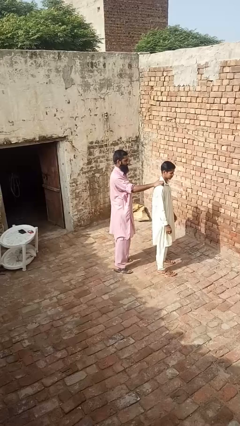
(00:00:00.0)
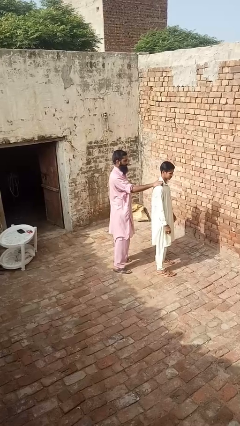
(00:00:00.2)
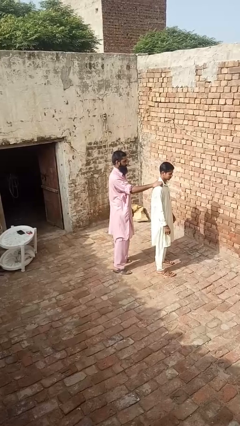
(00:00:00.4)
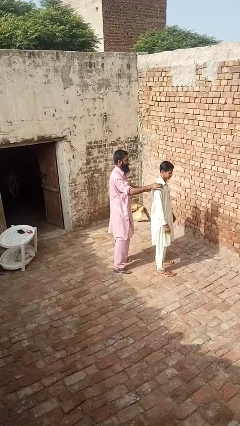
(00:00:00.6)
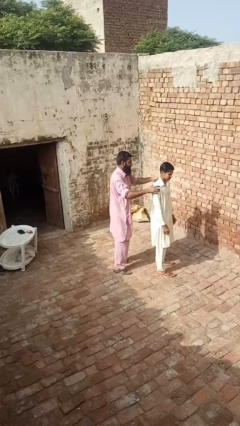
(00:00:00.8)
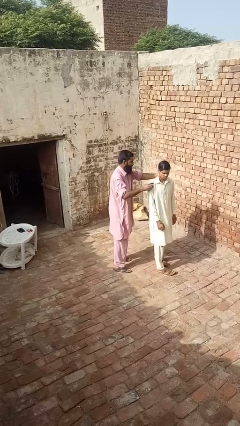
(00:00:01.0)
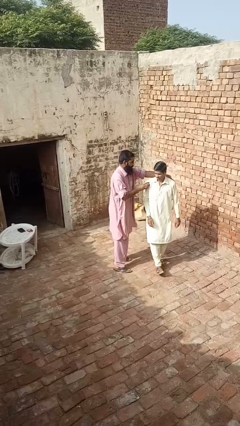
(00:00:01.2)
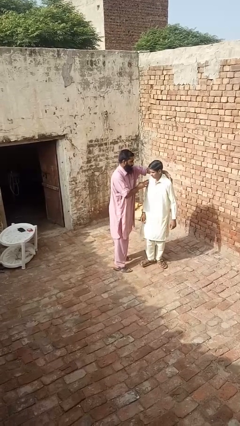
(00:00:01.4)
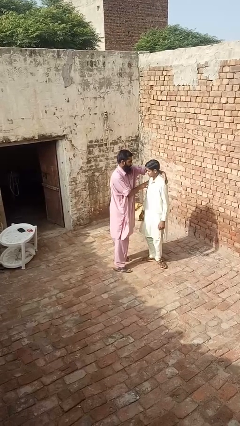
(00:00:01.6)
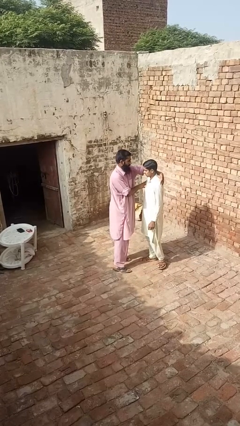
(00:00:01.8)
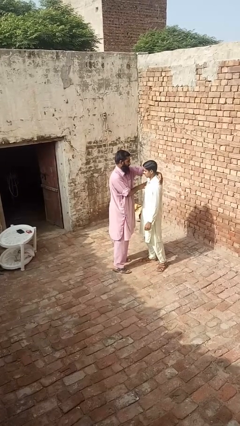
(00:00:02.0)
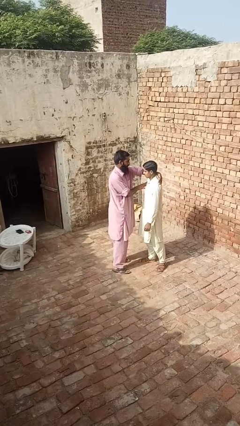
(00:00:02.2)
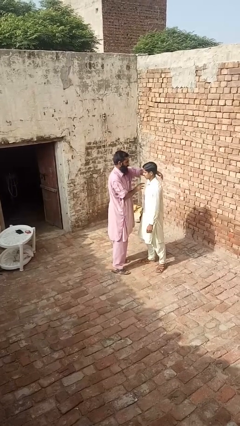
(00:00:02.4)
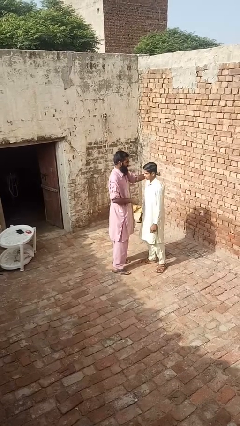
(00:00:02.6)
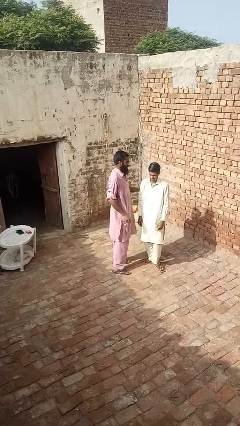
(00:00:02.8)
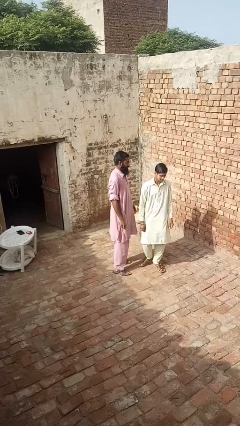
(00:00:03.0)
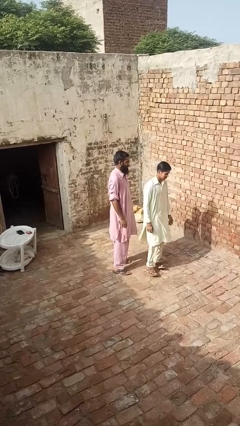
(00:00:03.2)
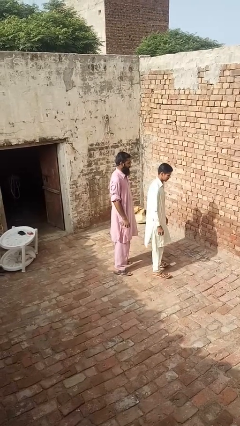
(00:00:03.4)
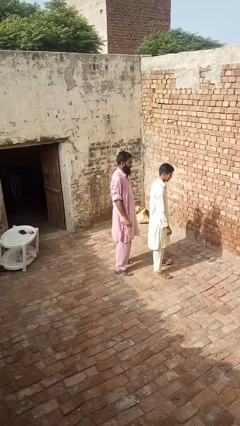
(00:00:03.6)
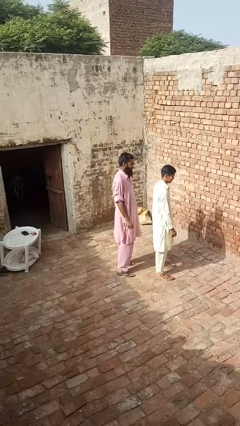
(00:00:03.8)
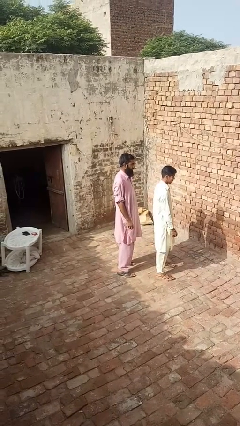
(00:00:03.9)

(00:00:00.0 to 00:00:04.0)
person spins person around

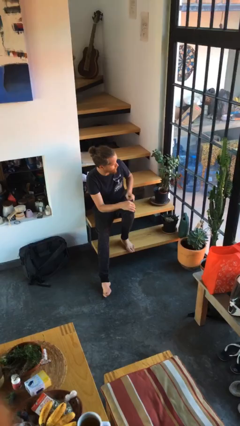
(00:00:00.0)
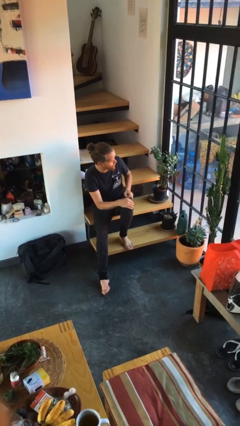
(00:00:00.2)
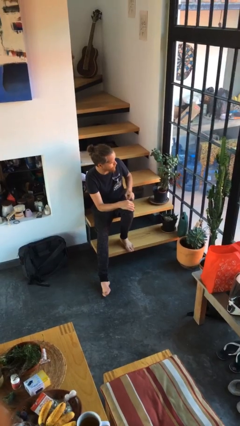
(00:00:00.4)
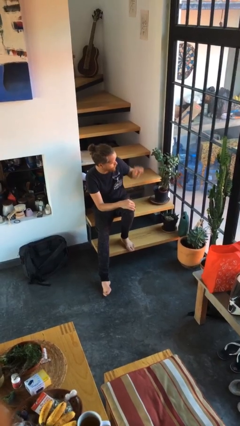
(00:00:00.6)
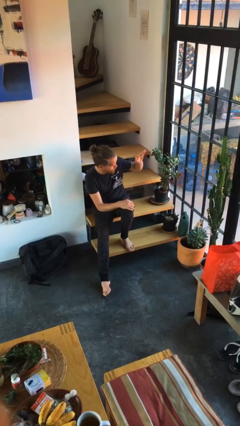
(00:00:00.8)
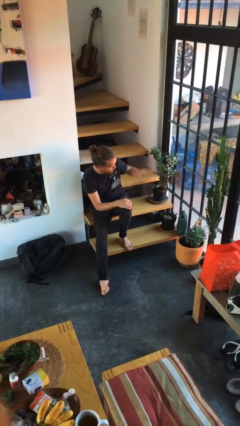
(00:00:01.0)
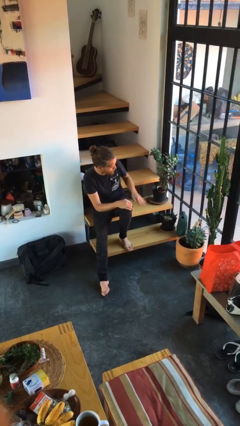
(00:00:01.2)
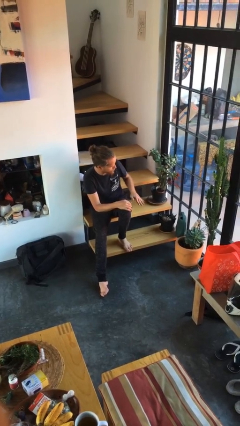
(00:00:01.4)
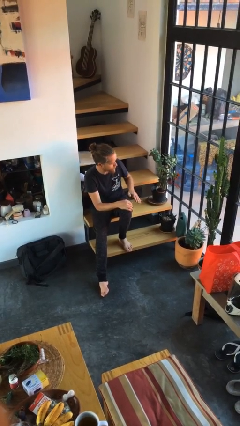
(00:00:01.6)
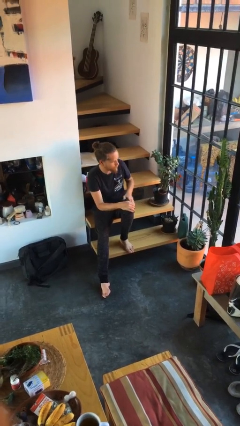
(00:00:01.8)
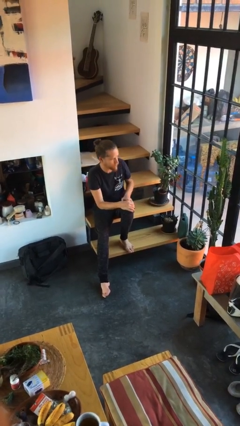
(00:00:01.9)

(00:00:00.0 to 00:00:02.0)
person gestures swipe down

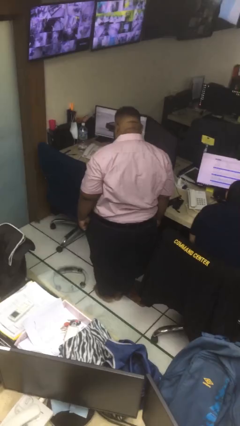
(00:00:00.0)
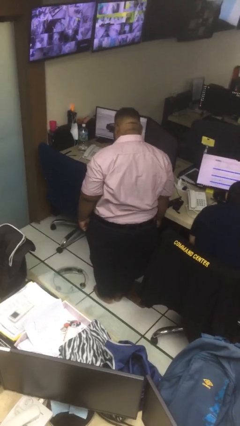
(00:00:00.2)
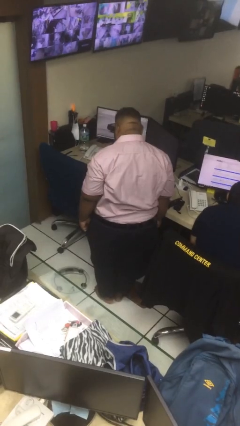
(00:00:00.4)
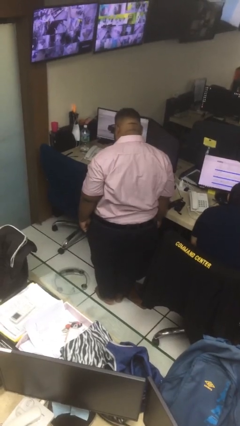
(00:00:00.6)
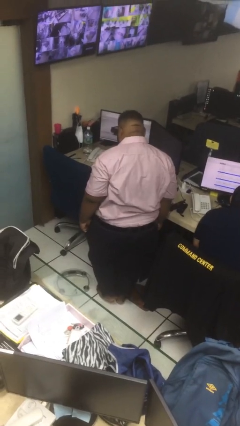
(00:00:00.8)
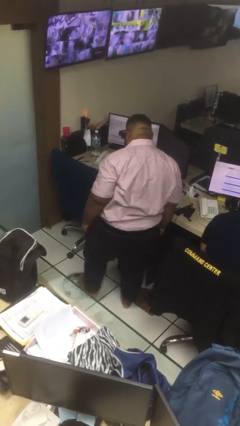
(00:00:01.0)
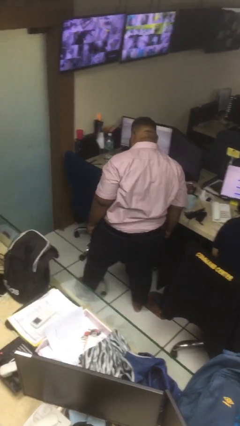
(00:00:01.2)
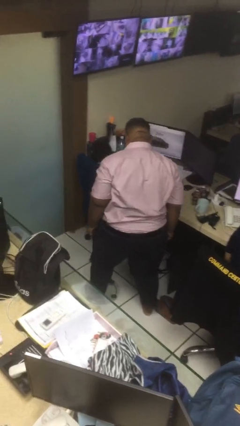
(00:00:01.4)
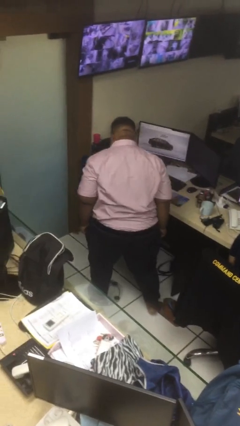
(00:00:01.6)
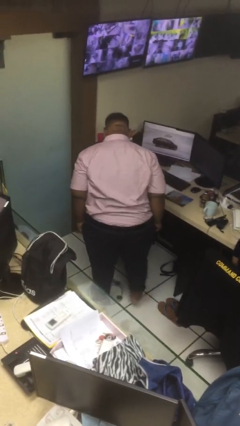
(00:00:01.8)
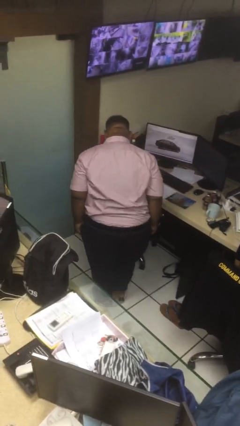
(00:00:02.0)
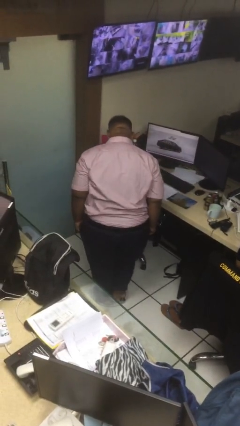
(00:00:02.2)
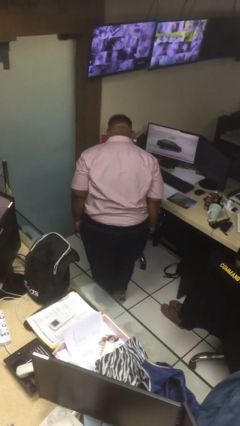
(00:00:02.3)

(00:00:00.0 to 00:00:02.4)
person uses bodyweight scale

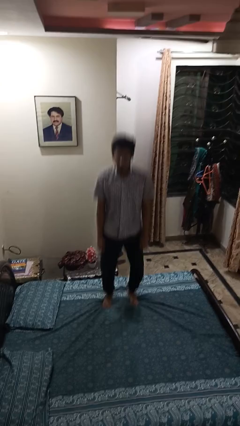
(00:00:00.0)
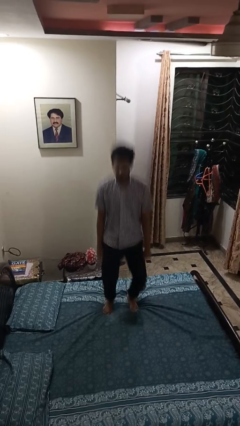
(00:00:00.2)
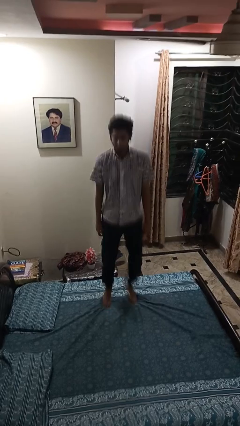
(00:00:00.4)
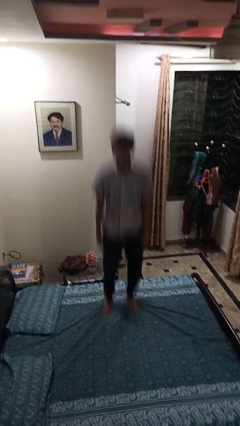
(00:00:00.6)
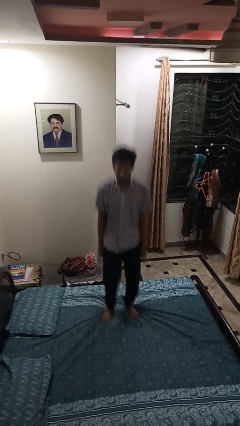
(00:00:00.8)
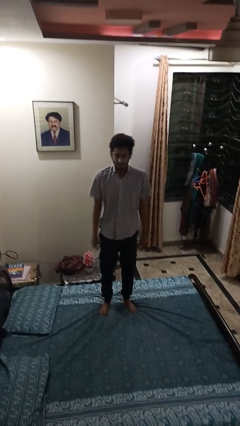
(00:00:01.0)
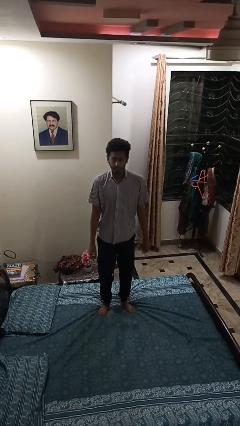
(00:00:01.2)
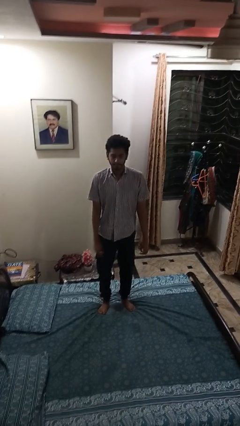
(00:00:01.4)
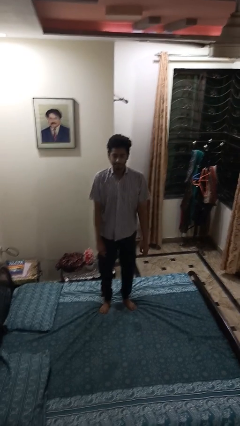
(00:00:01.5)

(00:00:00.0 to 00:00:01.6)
person jumps on bed

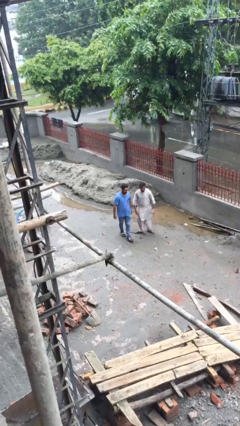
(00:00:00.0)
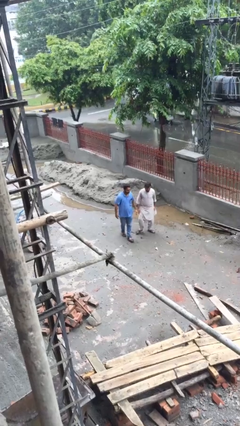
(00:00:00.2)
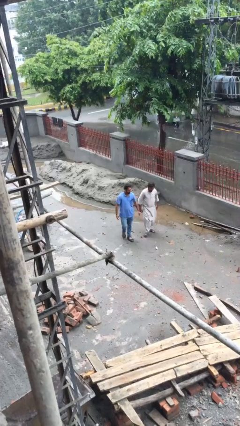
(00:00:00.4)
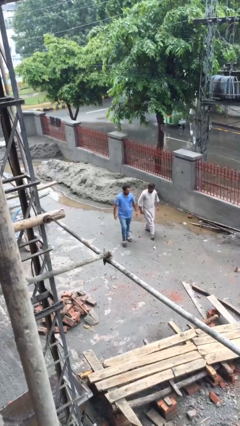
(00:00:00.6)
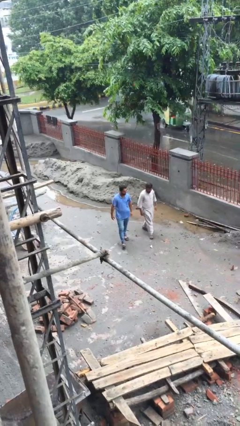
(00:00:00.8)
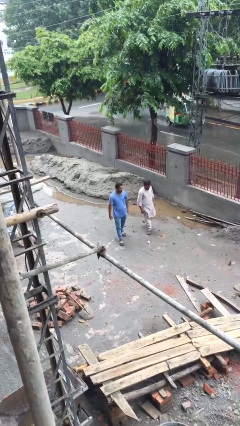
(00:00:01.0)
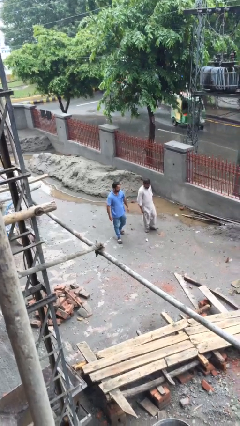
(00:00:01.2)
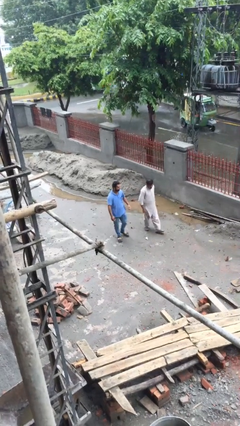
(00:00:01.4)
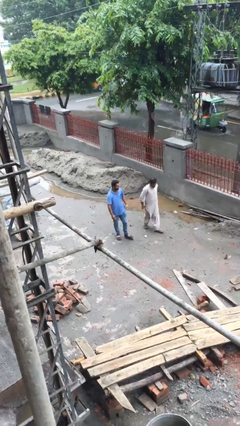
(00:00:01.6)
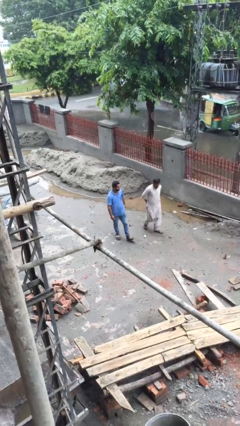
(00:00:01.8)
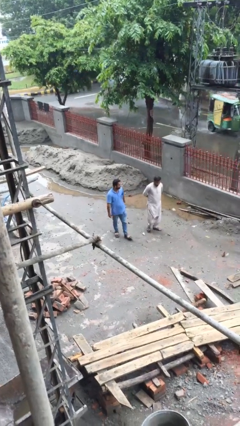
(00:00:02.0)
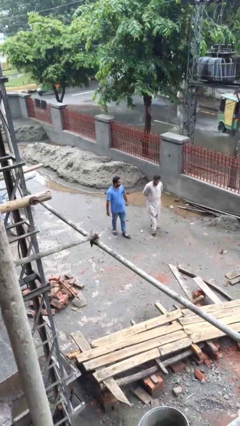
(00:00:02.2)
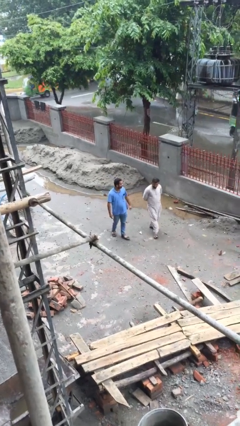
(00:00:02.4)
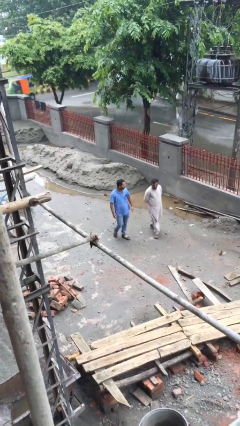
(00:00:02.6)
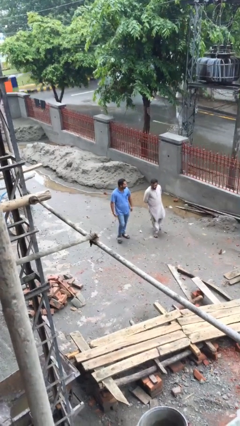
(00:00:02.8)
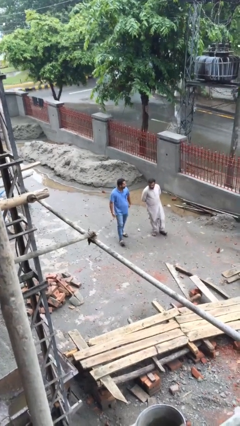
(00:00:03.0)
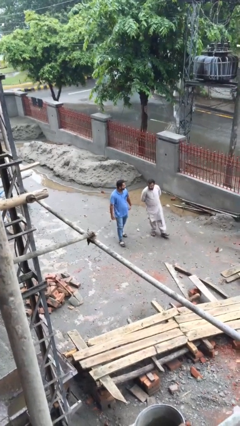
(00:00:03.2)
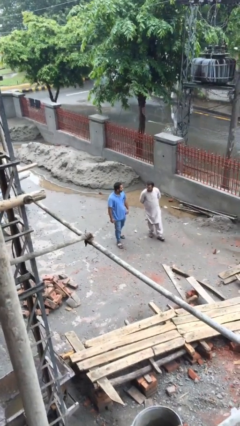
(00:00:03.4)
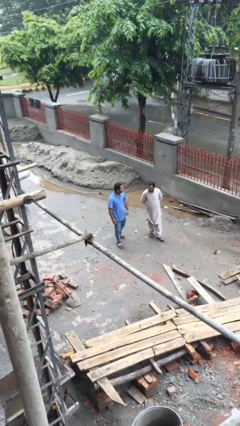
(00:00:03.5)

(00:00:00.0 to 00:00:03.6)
person talks to person

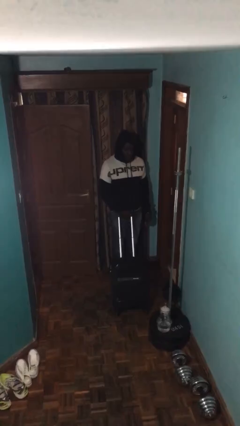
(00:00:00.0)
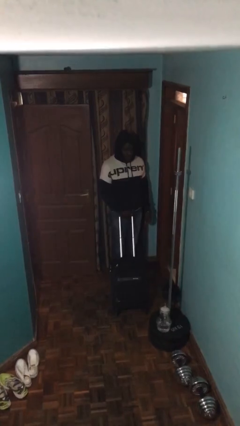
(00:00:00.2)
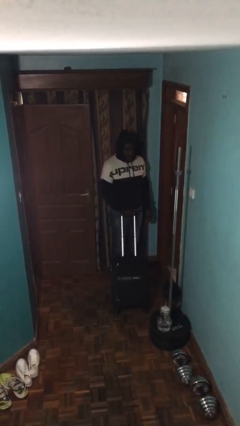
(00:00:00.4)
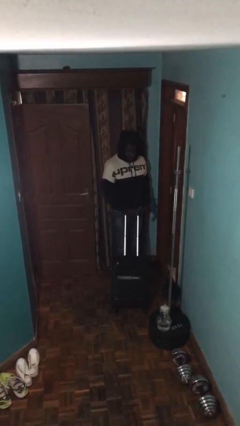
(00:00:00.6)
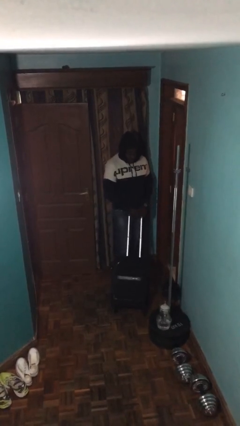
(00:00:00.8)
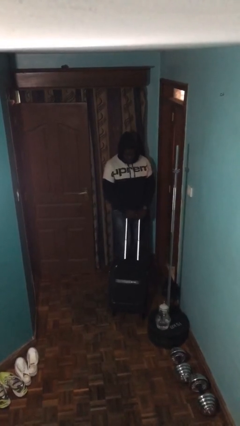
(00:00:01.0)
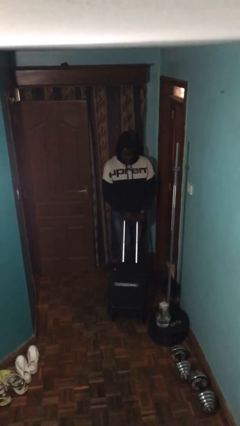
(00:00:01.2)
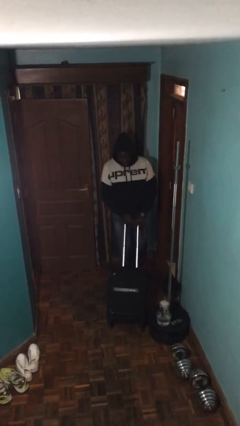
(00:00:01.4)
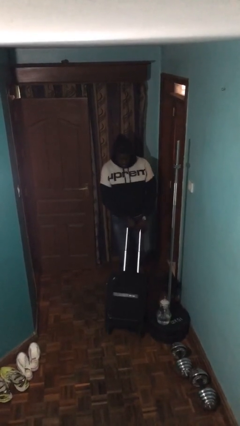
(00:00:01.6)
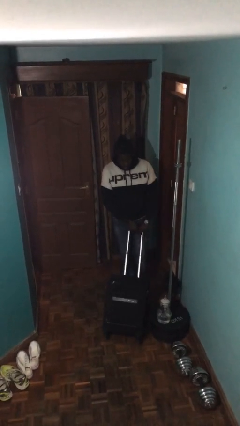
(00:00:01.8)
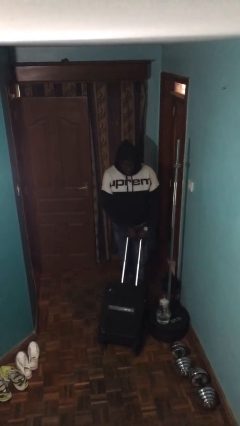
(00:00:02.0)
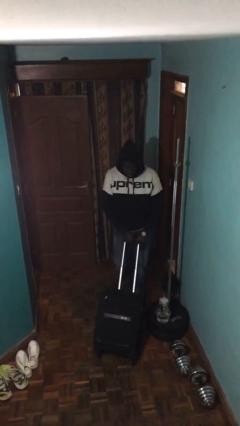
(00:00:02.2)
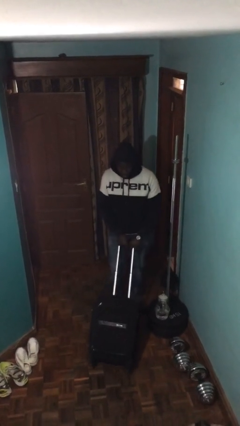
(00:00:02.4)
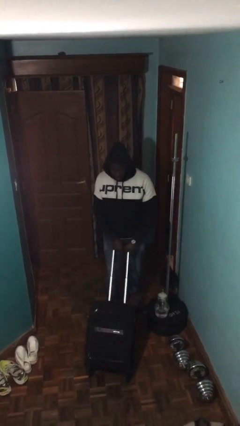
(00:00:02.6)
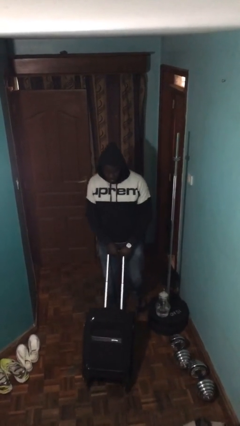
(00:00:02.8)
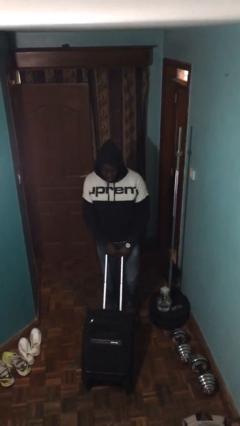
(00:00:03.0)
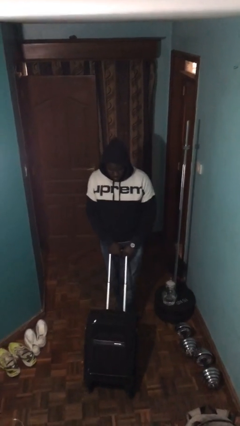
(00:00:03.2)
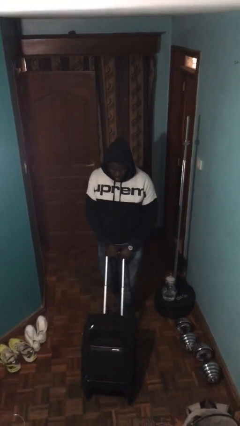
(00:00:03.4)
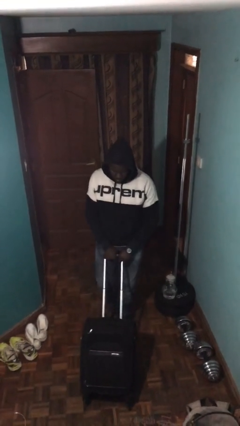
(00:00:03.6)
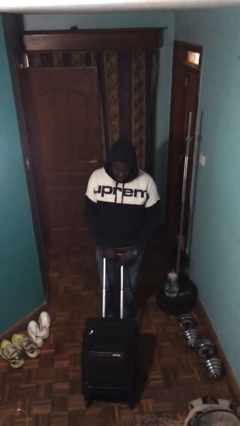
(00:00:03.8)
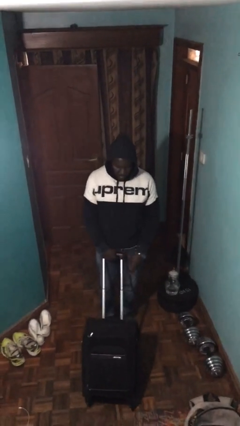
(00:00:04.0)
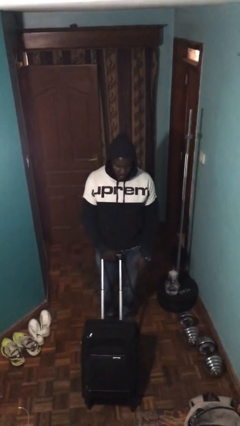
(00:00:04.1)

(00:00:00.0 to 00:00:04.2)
person pushes wheeled cart
